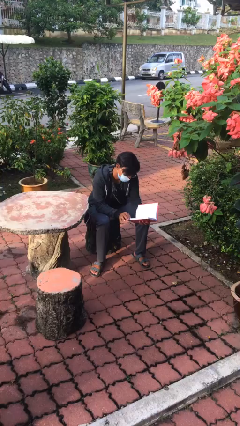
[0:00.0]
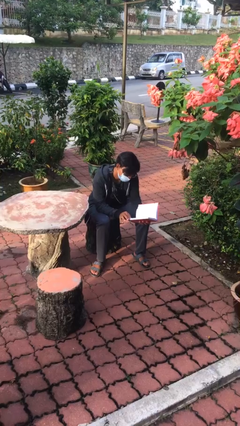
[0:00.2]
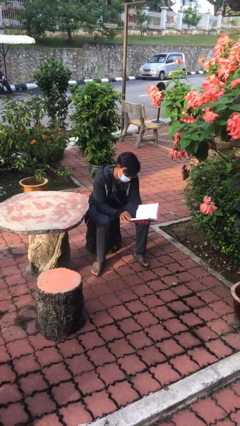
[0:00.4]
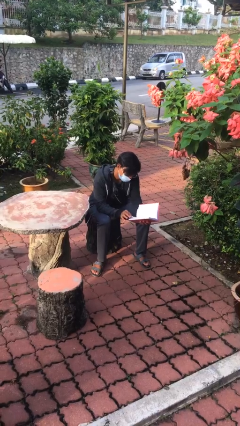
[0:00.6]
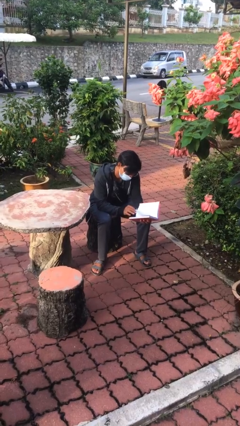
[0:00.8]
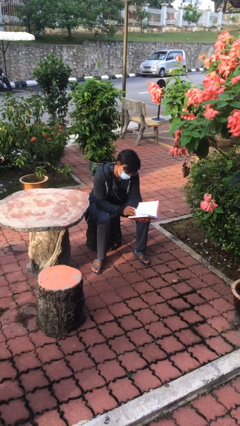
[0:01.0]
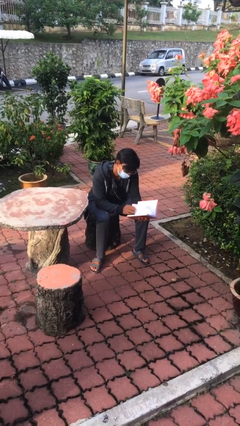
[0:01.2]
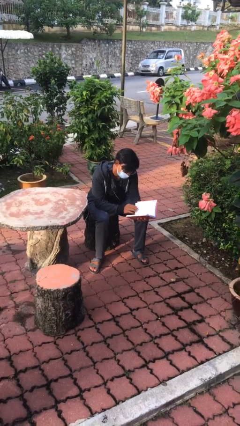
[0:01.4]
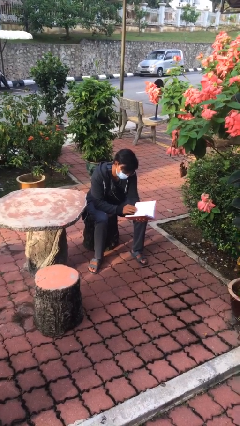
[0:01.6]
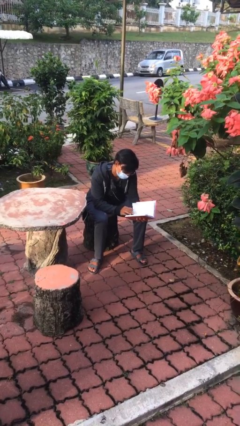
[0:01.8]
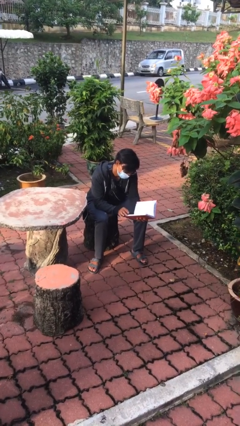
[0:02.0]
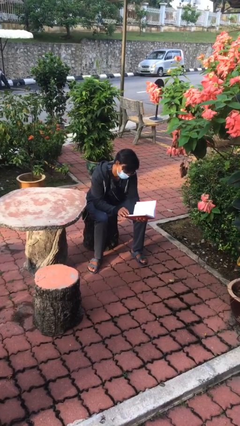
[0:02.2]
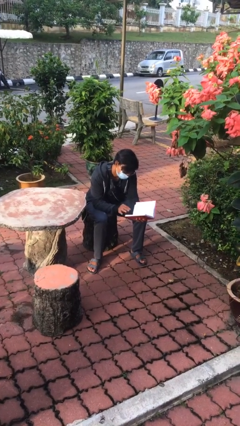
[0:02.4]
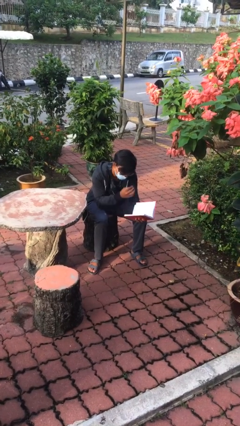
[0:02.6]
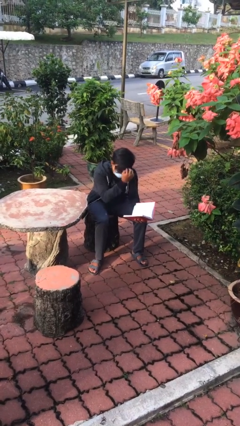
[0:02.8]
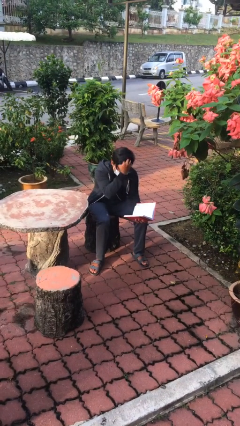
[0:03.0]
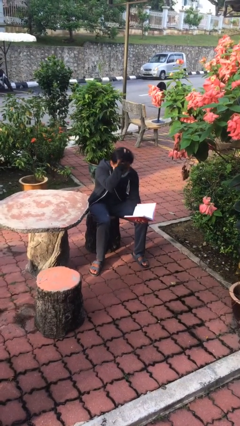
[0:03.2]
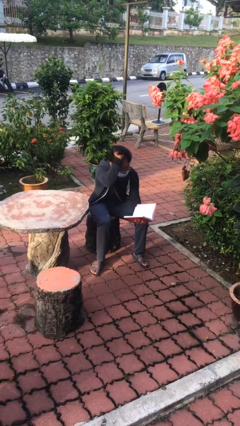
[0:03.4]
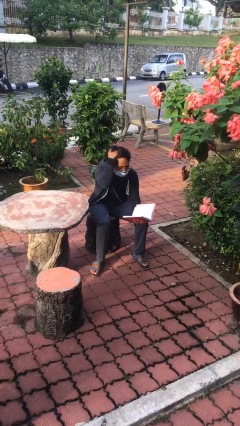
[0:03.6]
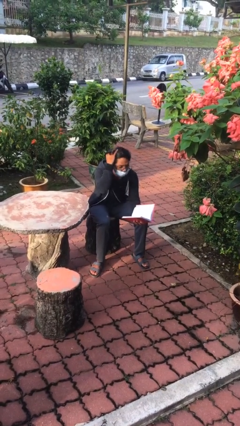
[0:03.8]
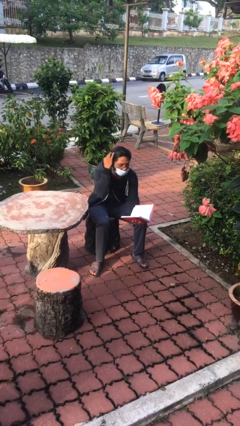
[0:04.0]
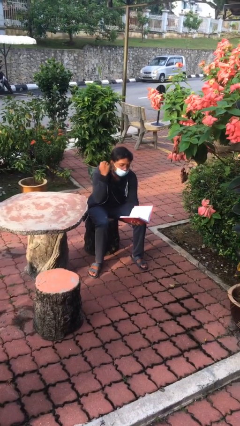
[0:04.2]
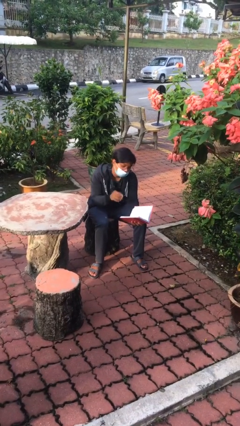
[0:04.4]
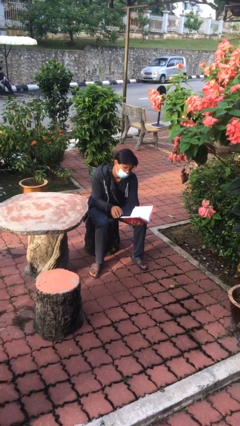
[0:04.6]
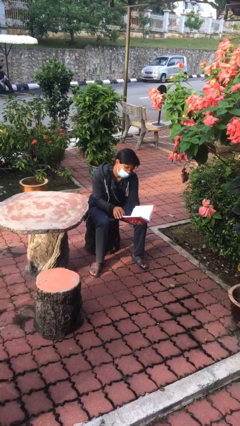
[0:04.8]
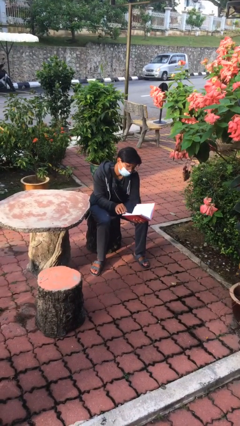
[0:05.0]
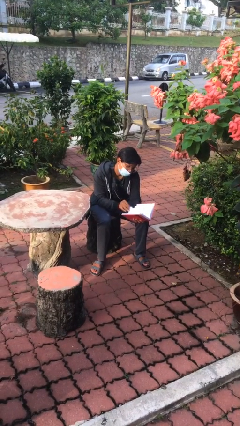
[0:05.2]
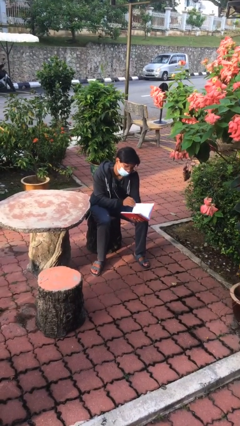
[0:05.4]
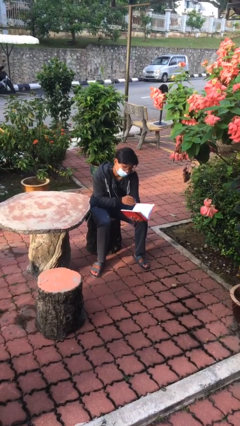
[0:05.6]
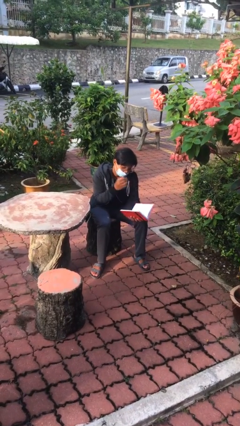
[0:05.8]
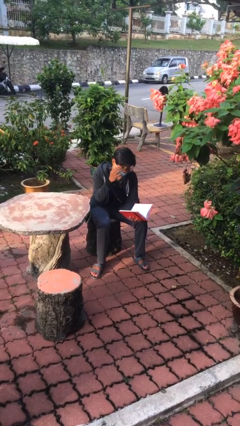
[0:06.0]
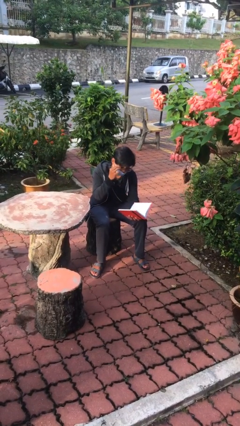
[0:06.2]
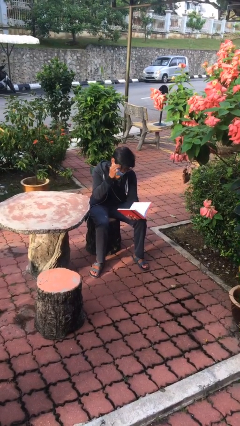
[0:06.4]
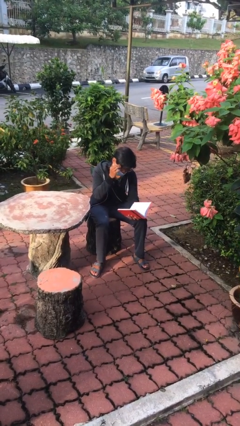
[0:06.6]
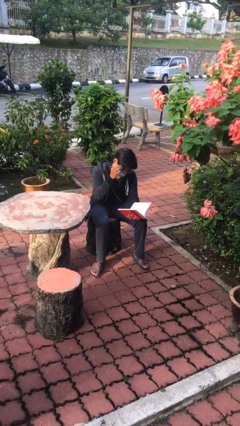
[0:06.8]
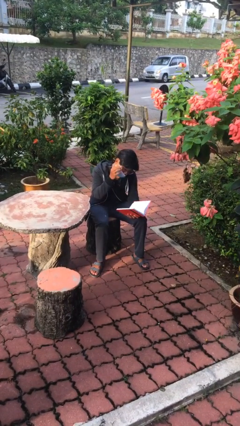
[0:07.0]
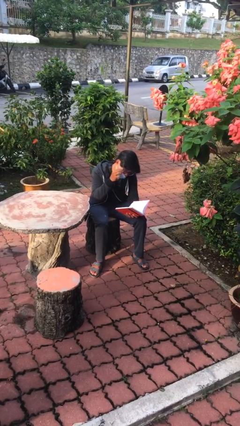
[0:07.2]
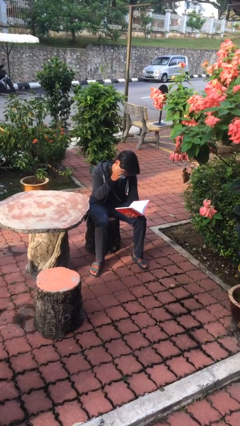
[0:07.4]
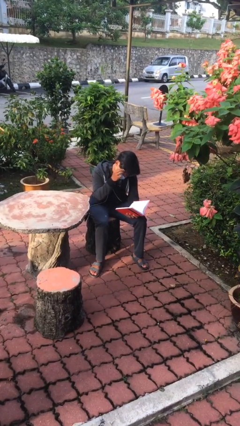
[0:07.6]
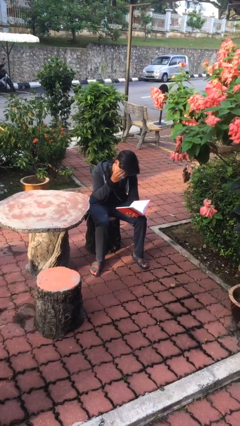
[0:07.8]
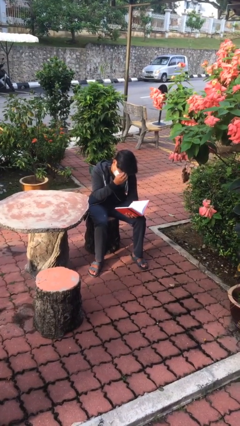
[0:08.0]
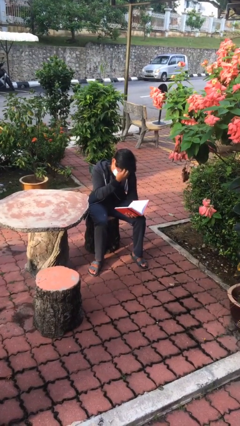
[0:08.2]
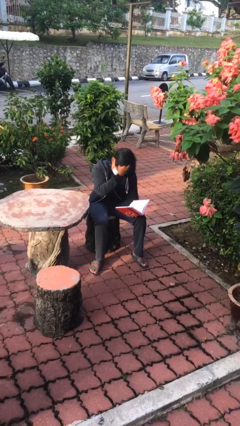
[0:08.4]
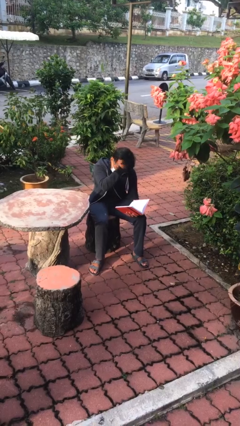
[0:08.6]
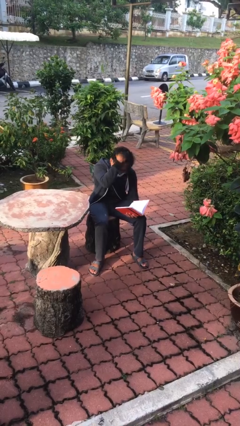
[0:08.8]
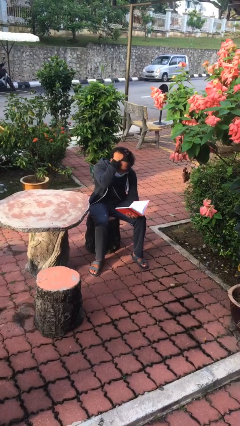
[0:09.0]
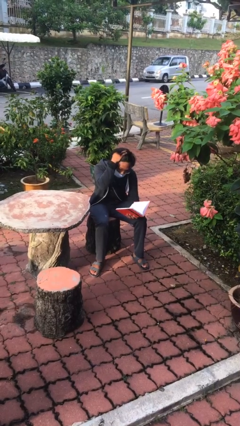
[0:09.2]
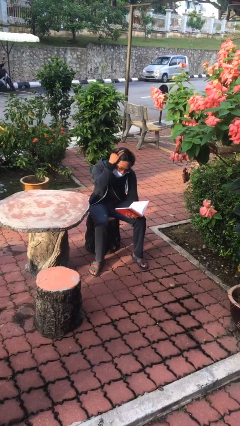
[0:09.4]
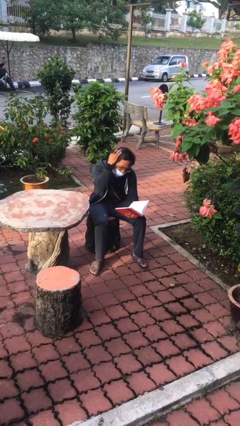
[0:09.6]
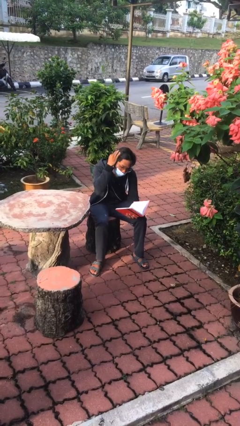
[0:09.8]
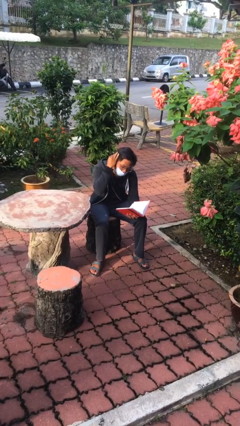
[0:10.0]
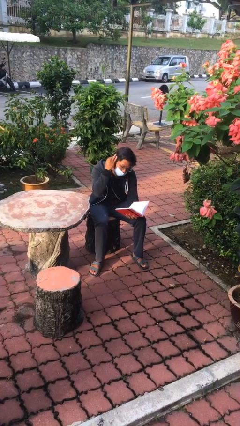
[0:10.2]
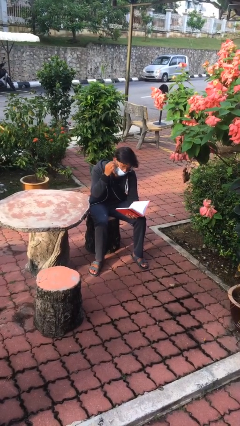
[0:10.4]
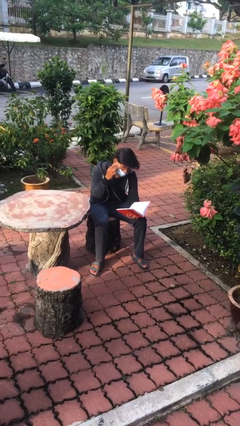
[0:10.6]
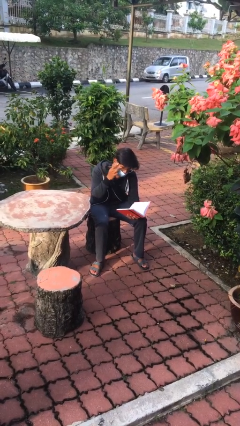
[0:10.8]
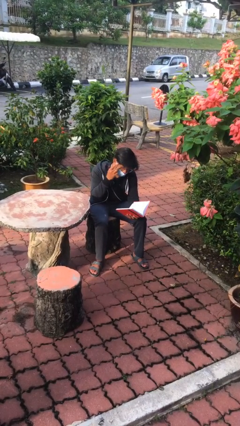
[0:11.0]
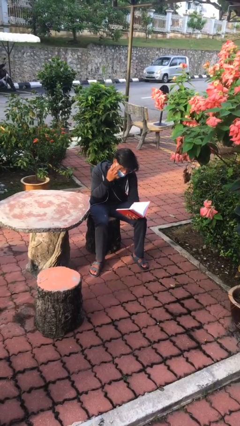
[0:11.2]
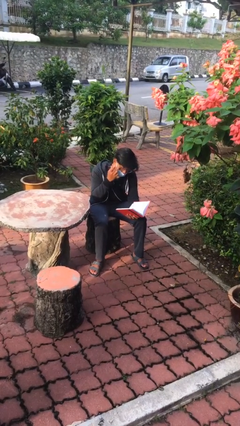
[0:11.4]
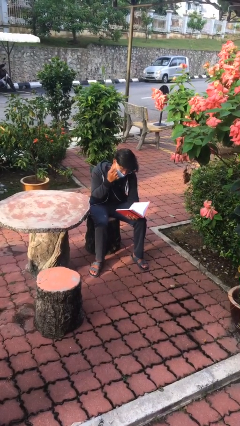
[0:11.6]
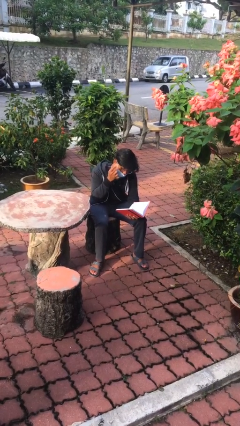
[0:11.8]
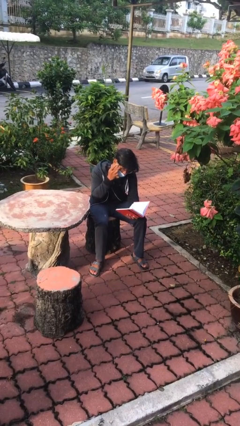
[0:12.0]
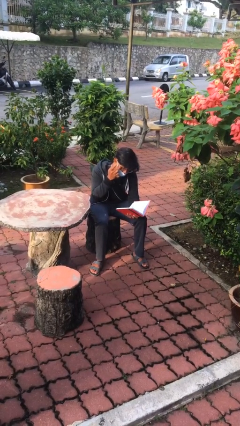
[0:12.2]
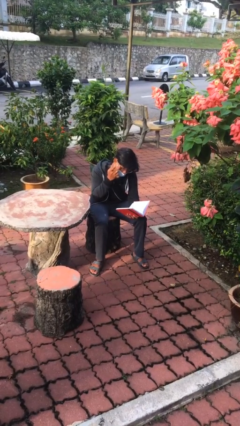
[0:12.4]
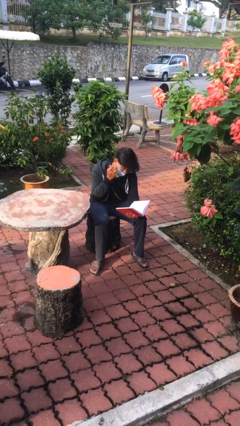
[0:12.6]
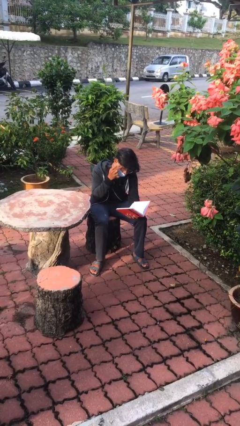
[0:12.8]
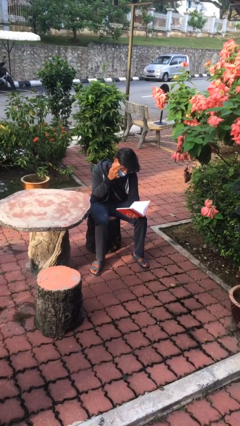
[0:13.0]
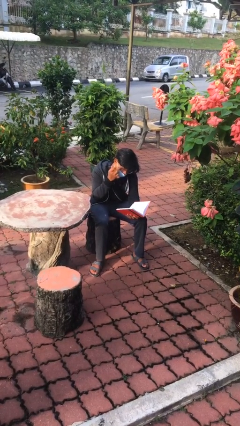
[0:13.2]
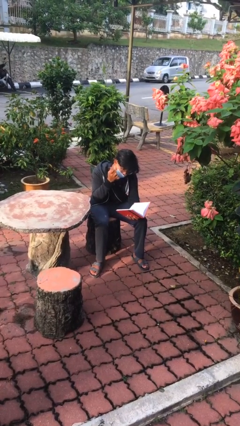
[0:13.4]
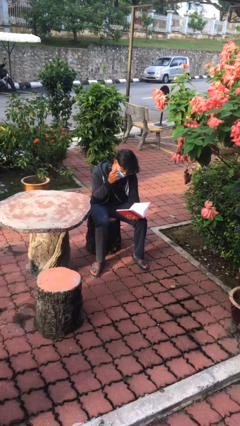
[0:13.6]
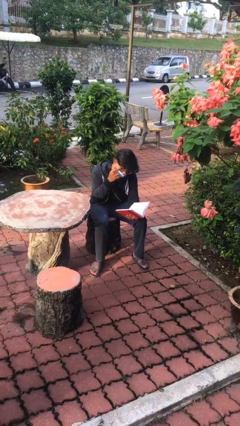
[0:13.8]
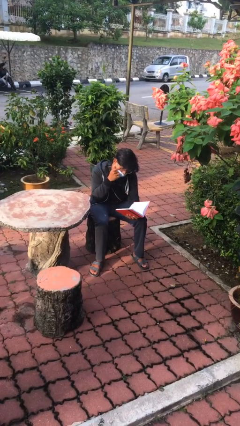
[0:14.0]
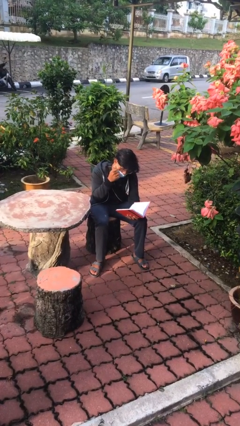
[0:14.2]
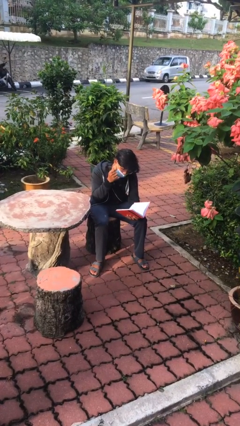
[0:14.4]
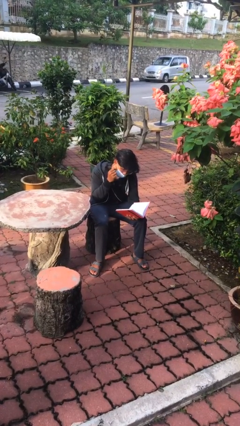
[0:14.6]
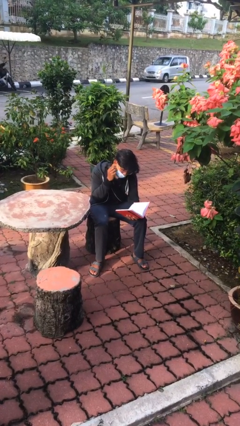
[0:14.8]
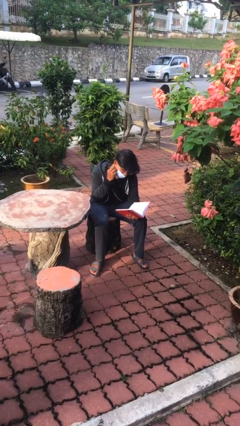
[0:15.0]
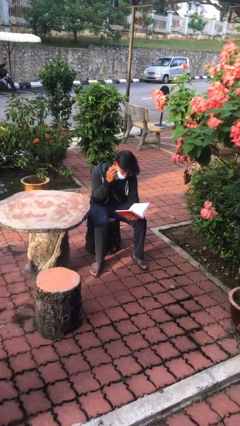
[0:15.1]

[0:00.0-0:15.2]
person reads document

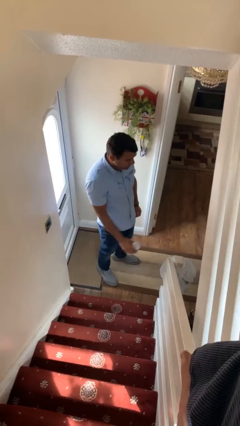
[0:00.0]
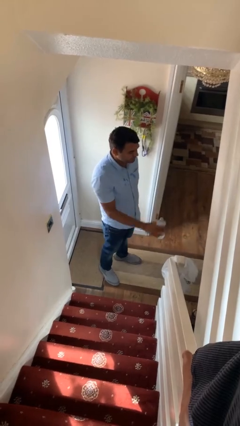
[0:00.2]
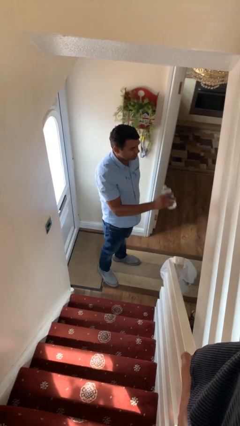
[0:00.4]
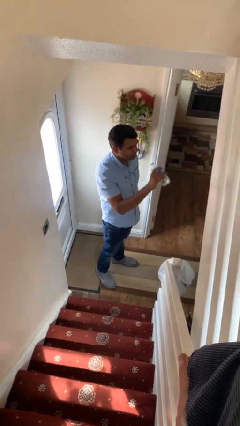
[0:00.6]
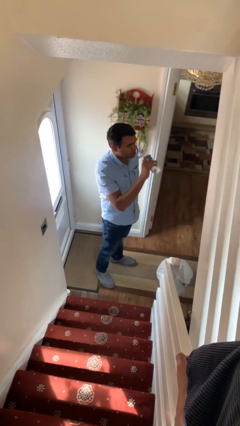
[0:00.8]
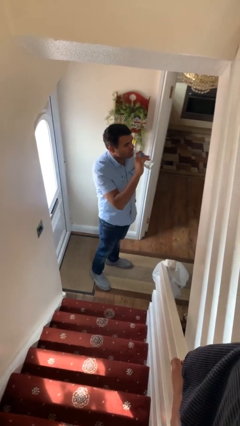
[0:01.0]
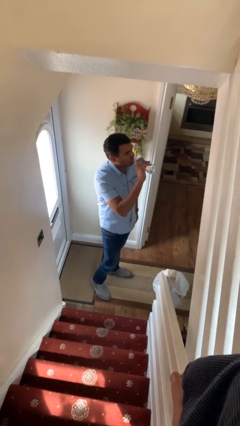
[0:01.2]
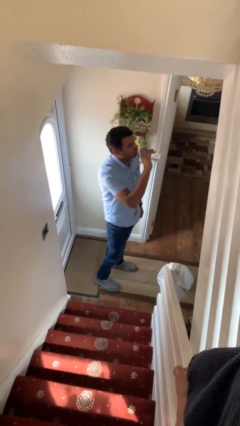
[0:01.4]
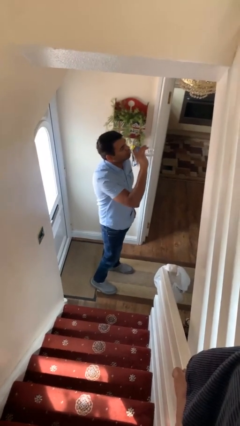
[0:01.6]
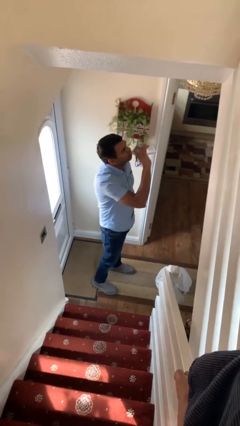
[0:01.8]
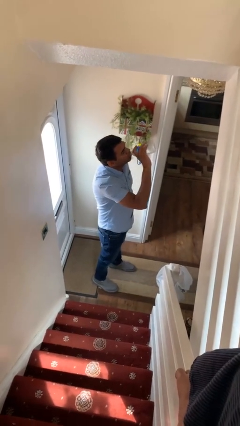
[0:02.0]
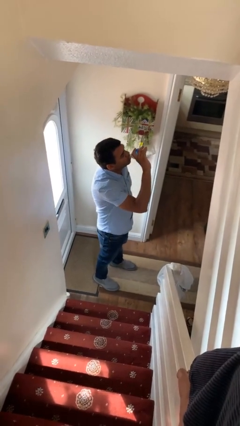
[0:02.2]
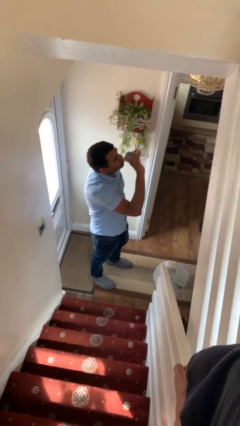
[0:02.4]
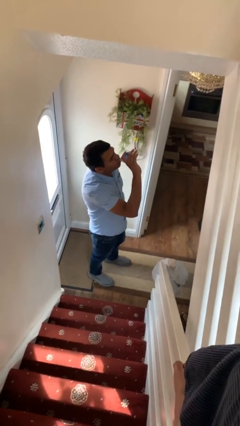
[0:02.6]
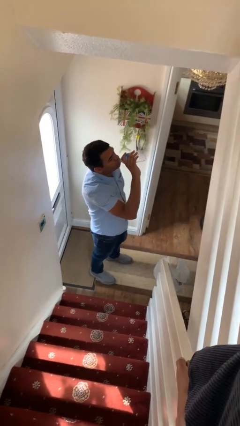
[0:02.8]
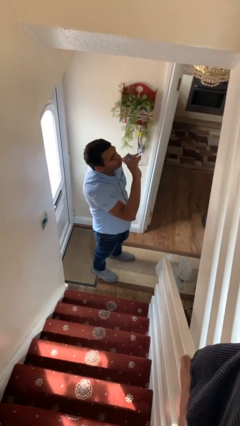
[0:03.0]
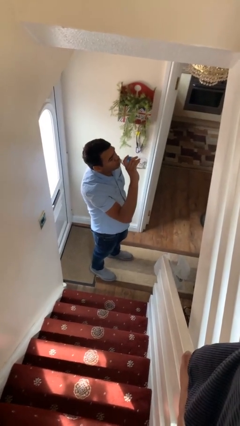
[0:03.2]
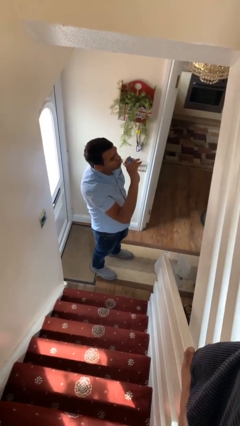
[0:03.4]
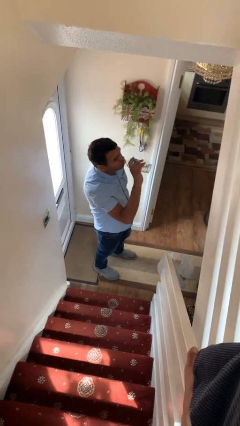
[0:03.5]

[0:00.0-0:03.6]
person drinks from bottle
